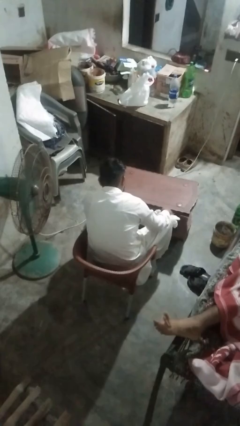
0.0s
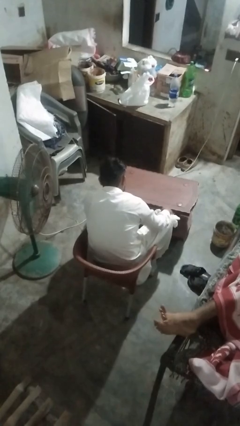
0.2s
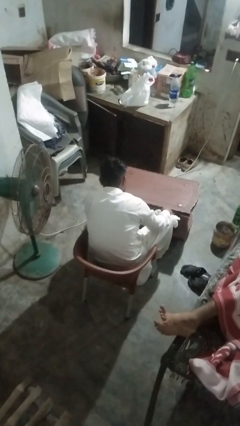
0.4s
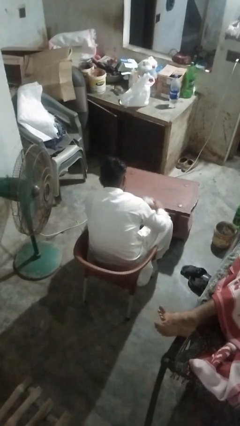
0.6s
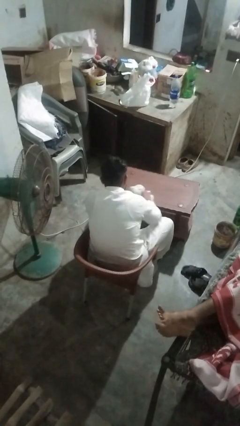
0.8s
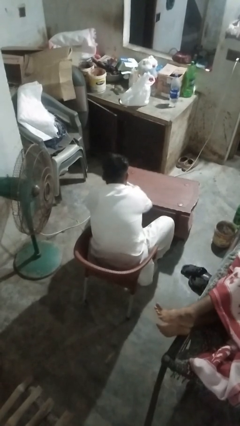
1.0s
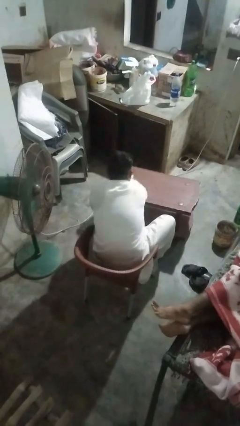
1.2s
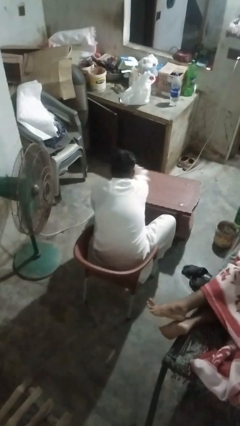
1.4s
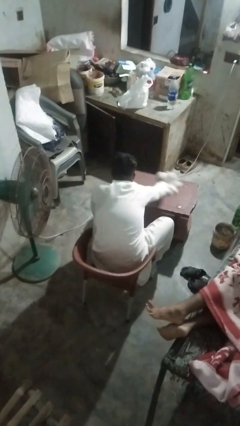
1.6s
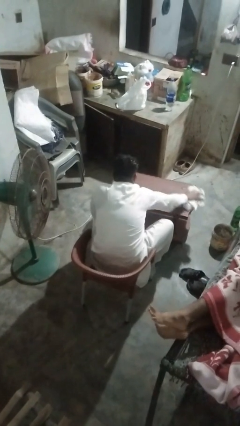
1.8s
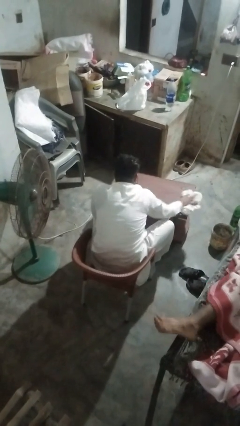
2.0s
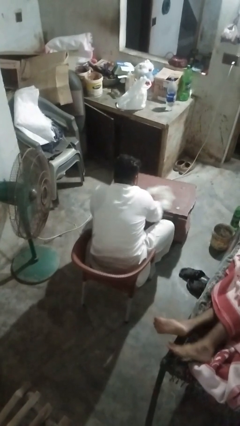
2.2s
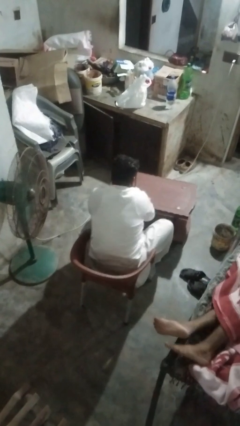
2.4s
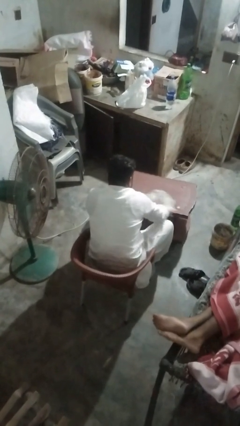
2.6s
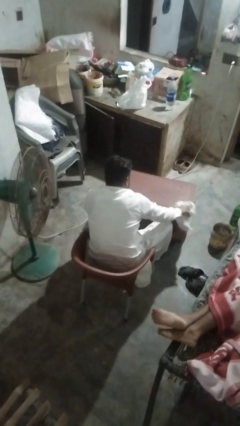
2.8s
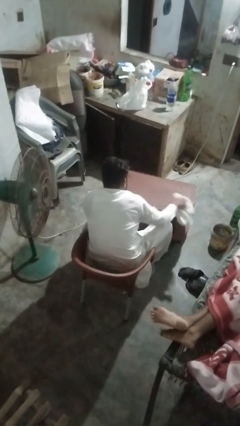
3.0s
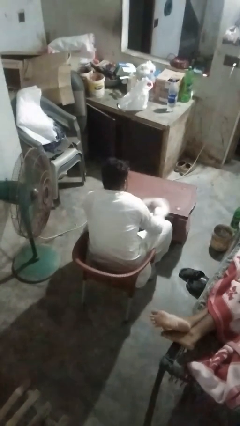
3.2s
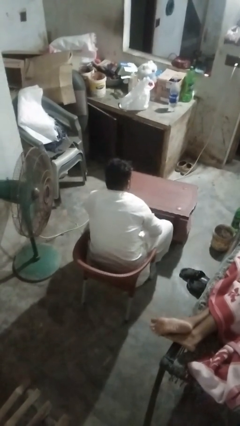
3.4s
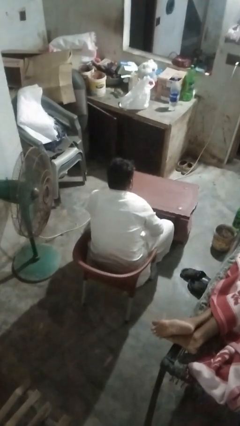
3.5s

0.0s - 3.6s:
person cleans table with rag

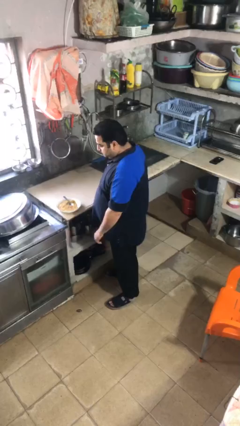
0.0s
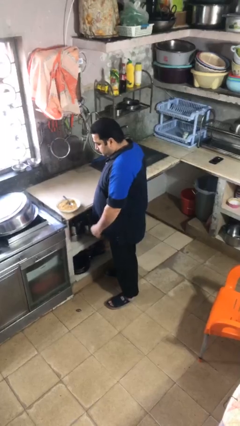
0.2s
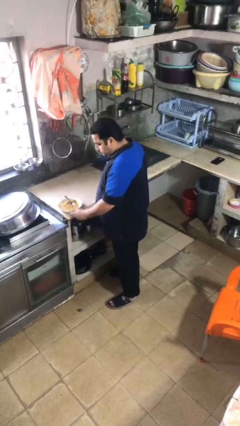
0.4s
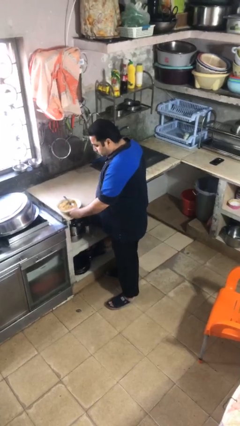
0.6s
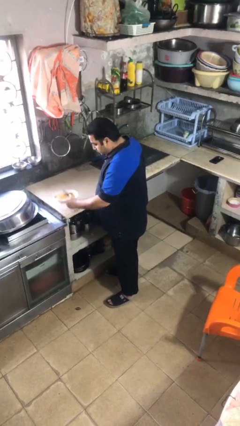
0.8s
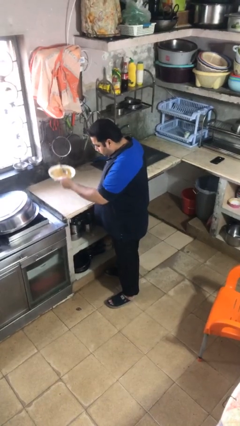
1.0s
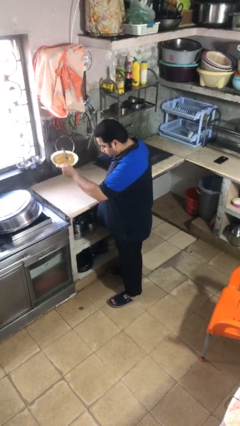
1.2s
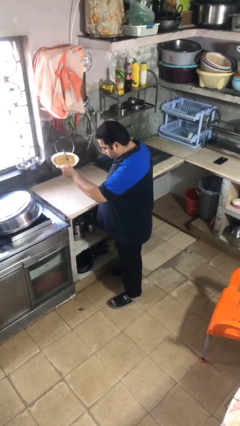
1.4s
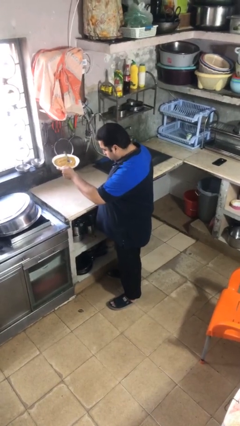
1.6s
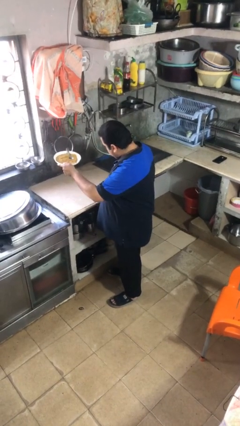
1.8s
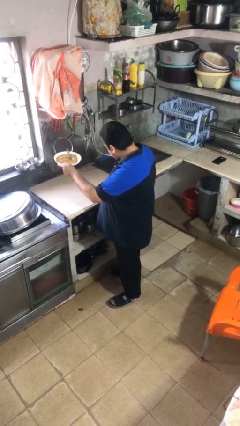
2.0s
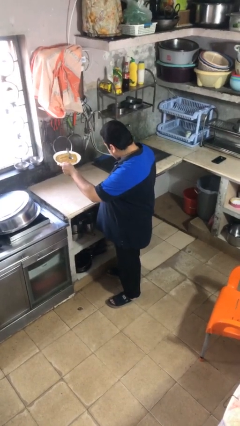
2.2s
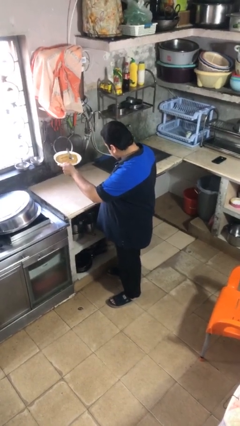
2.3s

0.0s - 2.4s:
person picks up object from countertop

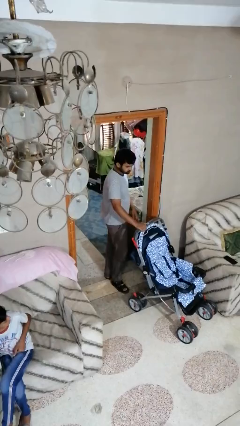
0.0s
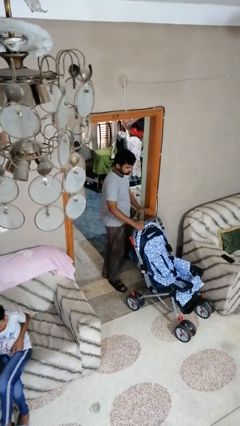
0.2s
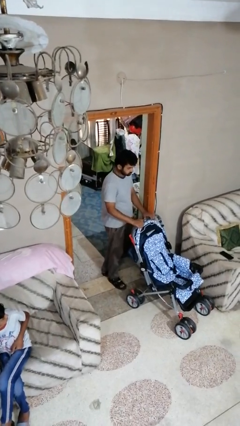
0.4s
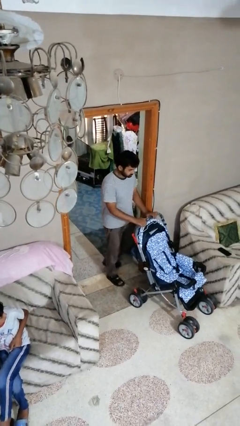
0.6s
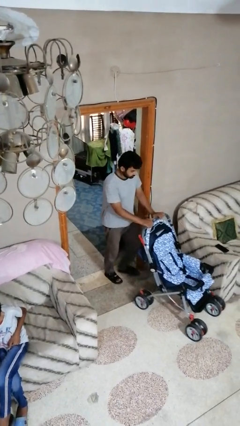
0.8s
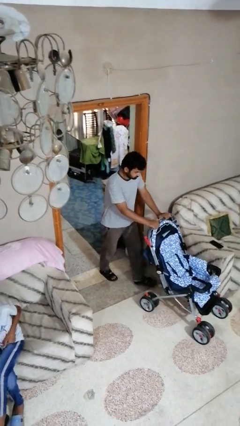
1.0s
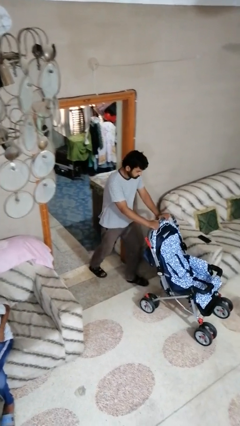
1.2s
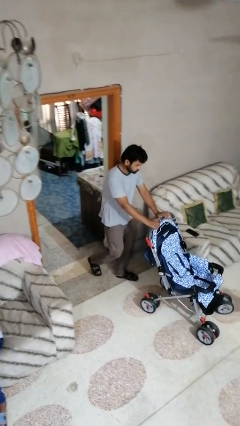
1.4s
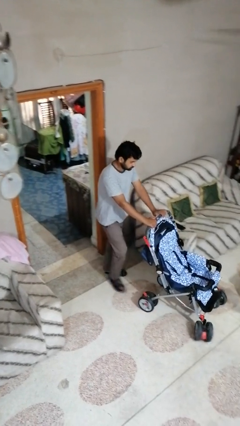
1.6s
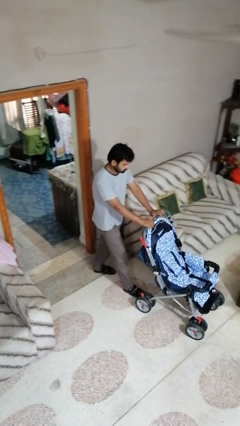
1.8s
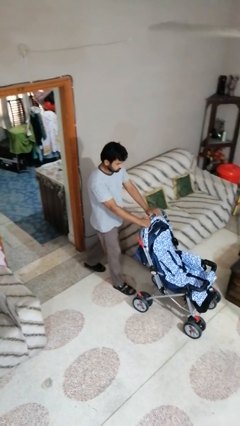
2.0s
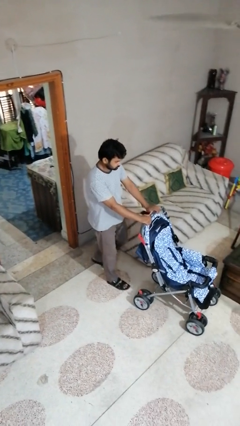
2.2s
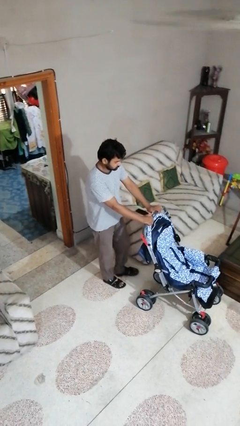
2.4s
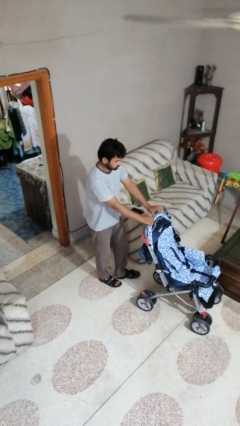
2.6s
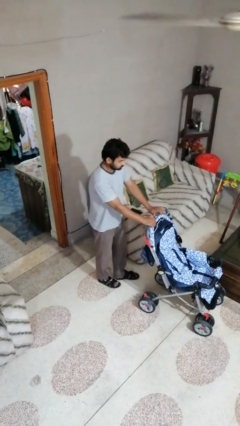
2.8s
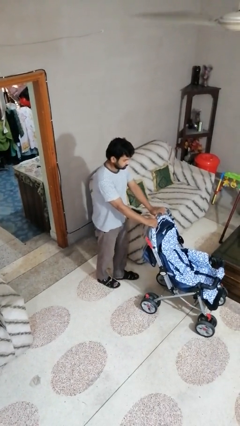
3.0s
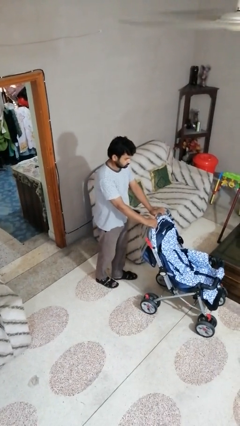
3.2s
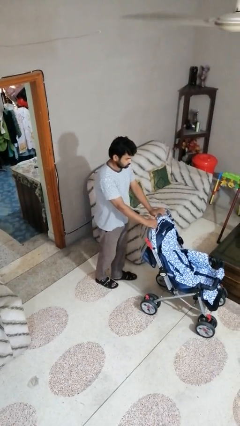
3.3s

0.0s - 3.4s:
person pushes wheeled cart

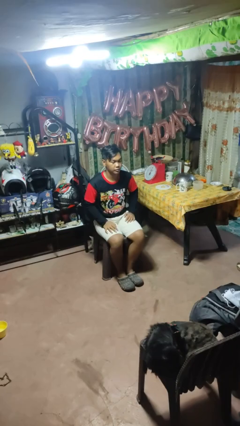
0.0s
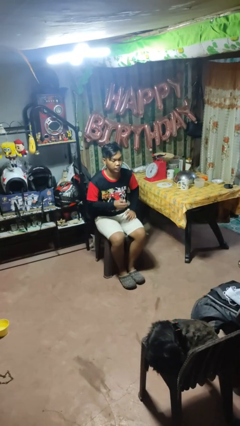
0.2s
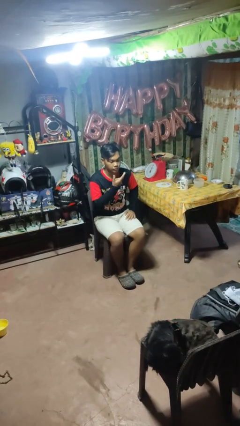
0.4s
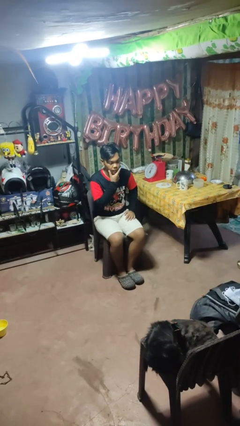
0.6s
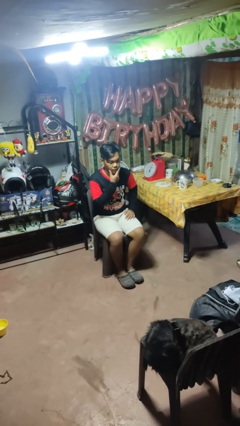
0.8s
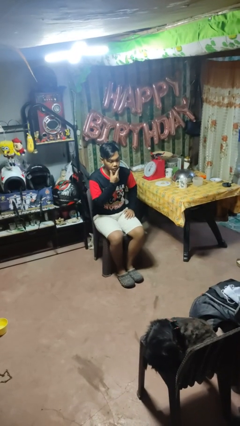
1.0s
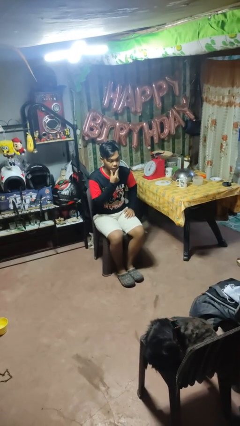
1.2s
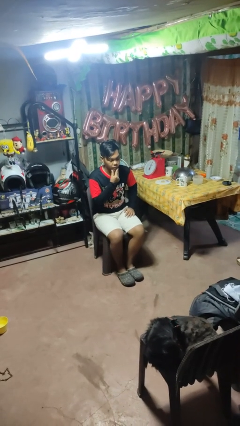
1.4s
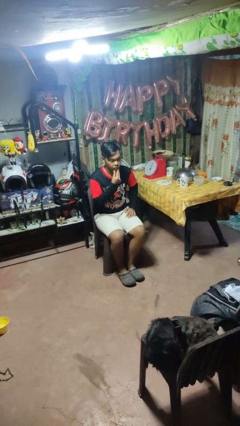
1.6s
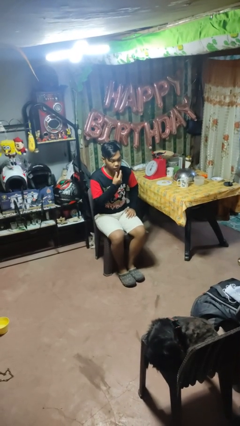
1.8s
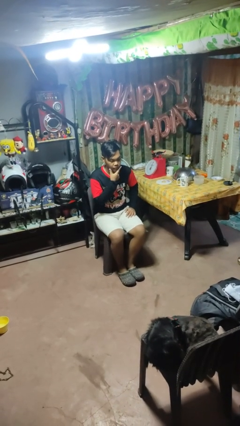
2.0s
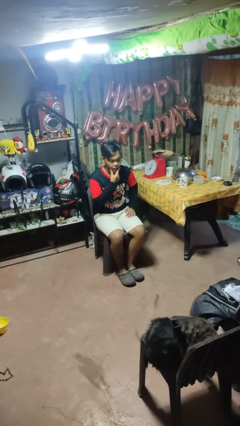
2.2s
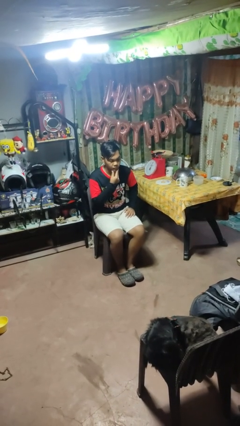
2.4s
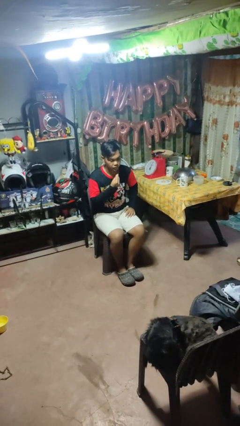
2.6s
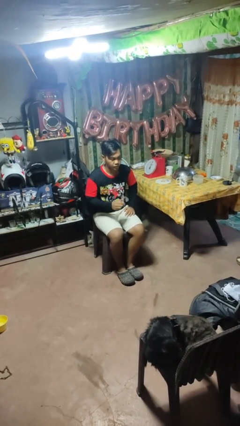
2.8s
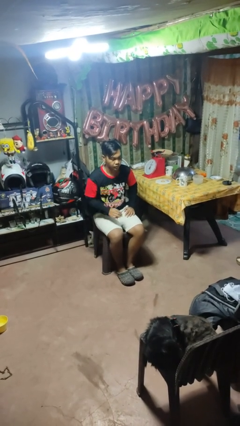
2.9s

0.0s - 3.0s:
person strokes chin

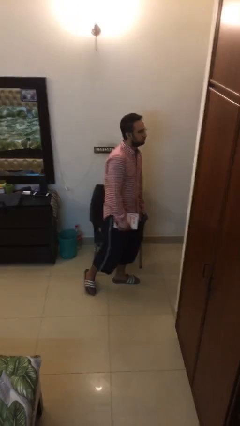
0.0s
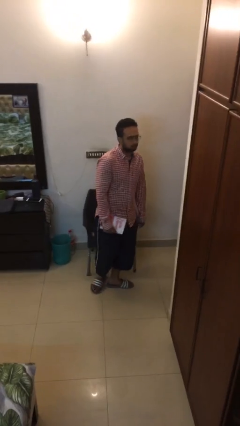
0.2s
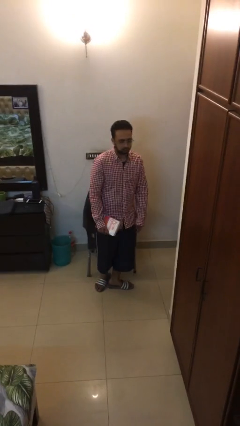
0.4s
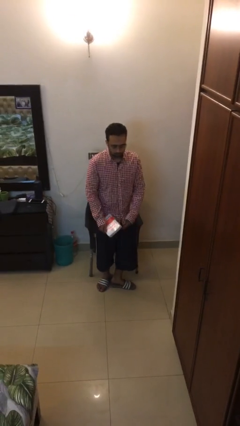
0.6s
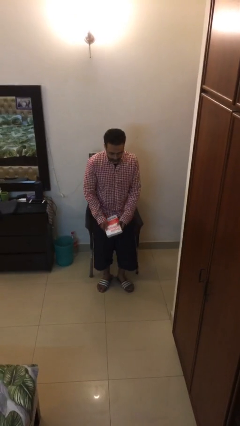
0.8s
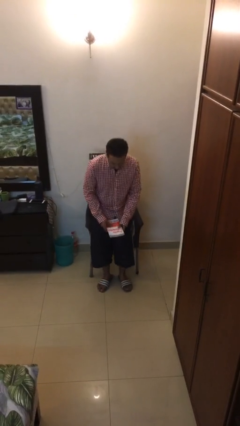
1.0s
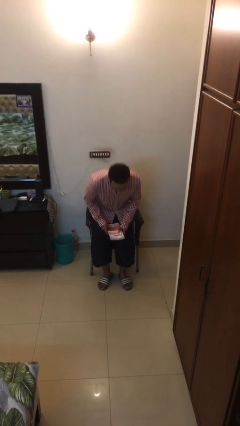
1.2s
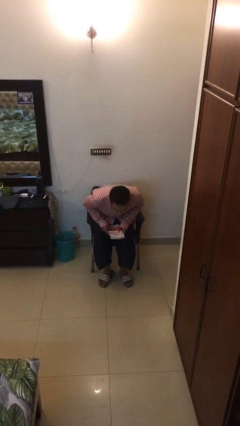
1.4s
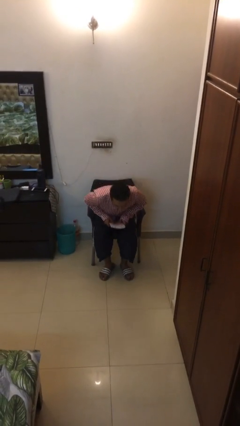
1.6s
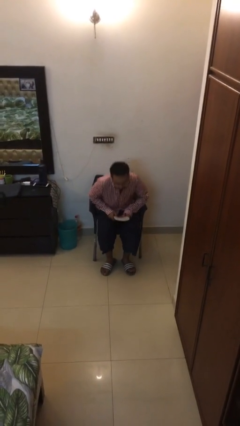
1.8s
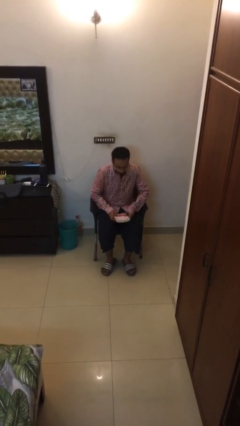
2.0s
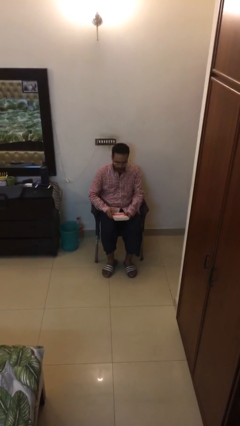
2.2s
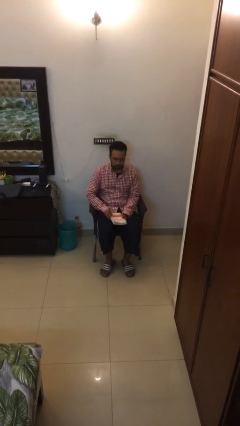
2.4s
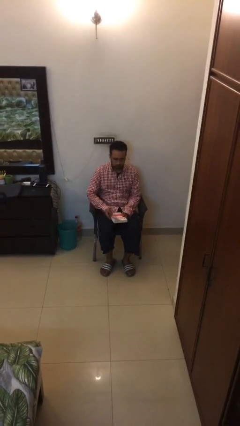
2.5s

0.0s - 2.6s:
person sits down

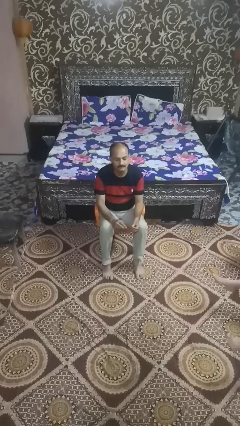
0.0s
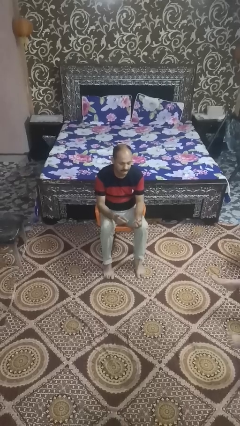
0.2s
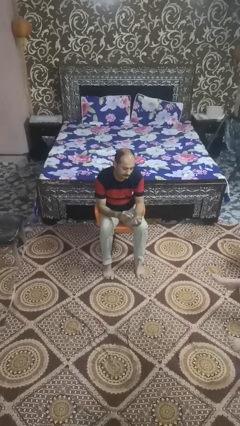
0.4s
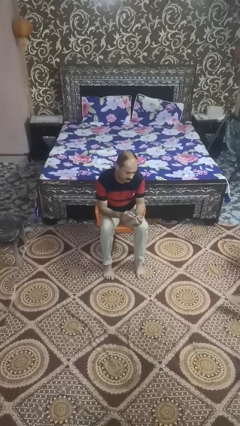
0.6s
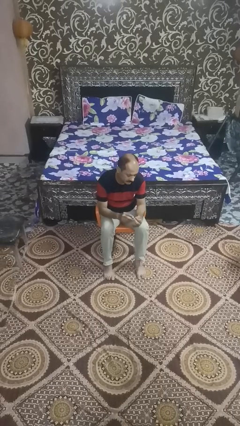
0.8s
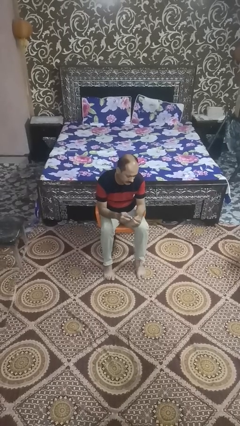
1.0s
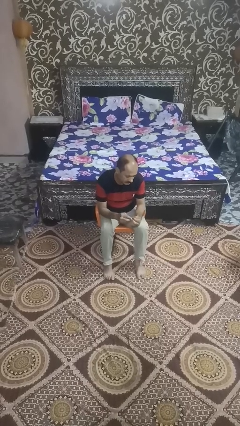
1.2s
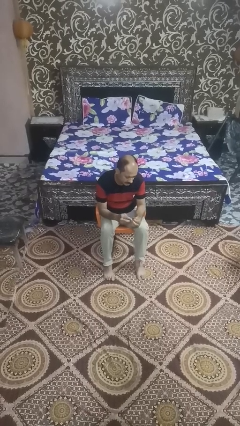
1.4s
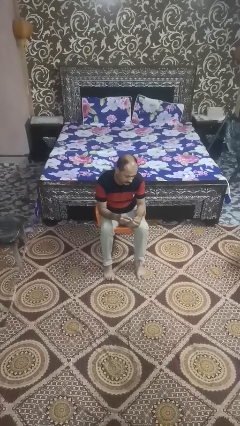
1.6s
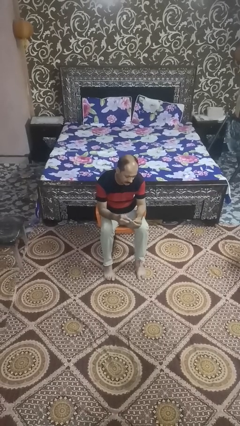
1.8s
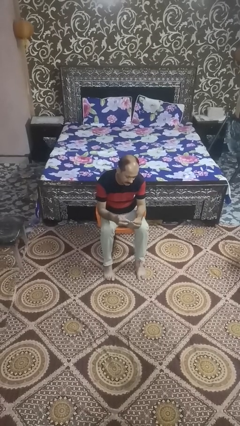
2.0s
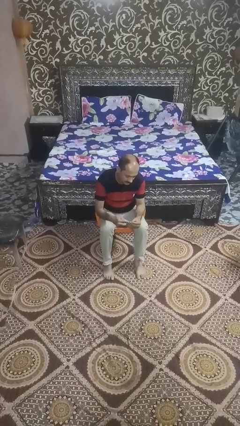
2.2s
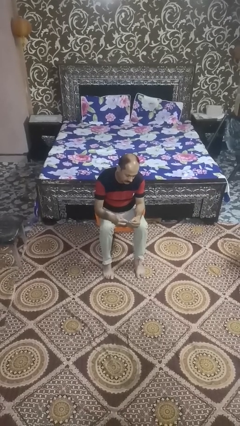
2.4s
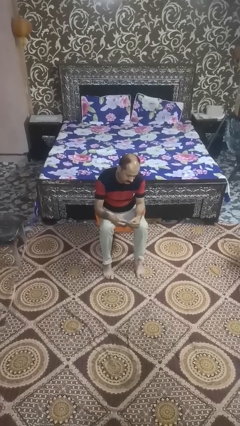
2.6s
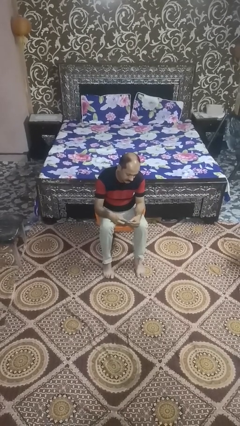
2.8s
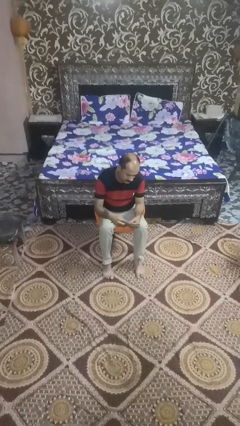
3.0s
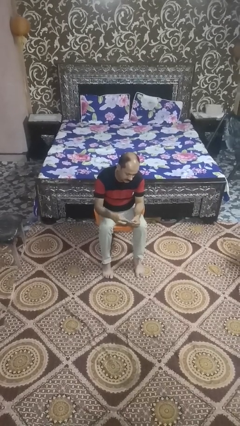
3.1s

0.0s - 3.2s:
person files fingernails
